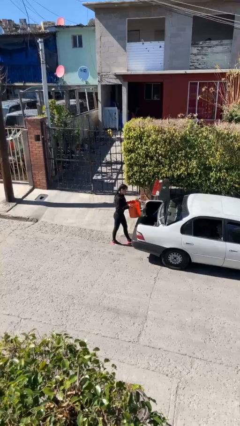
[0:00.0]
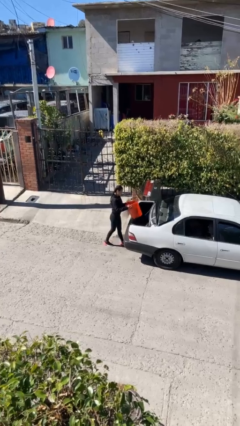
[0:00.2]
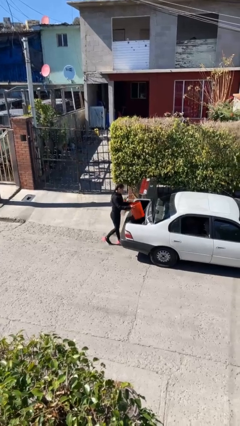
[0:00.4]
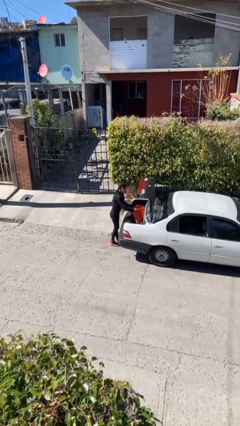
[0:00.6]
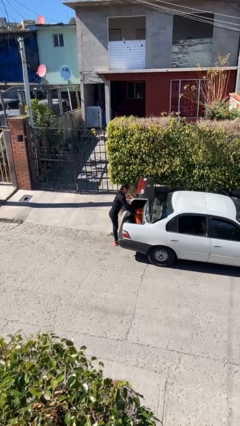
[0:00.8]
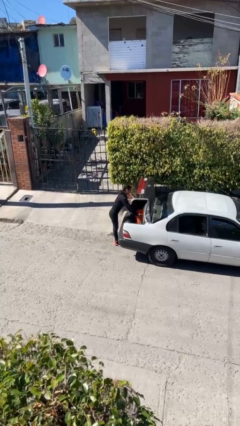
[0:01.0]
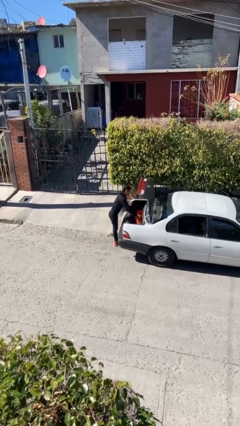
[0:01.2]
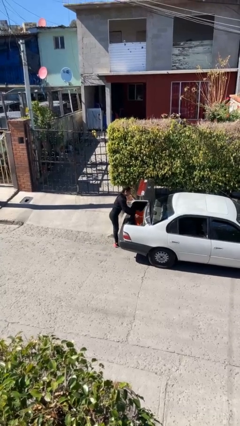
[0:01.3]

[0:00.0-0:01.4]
person loads car

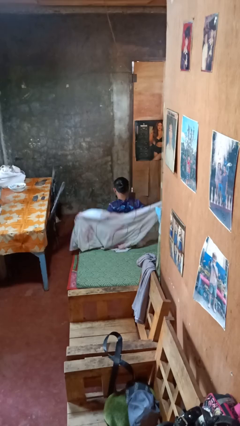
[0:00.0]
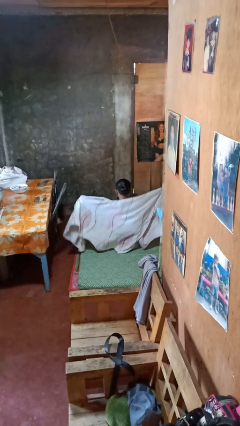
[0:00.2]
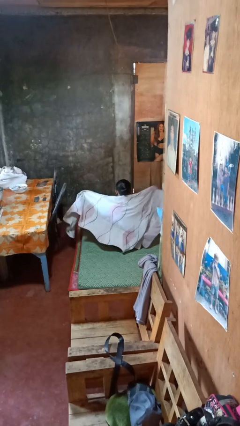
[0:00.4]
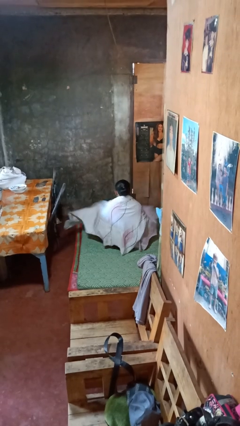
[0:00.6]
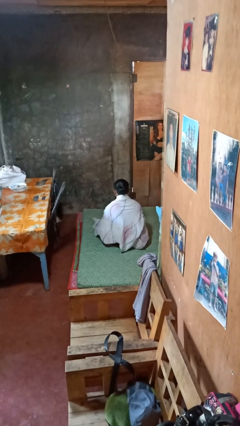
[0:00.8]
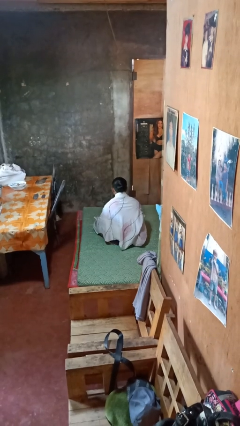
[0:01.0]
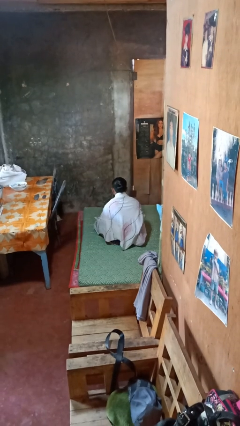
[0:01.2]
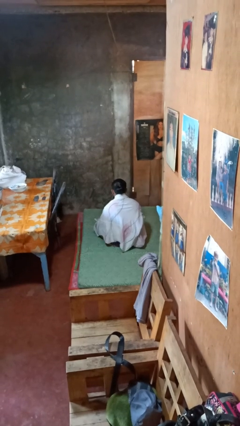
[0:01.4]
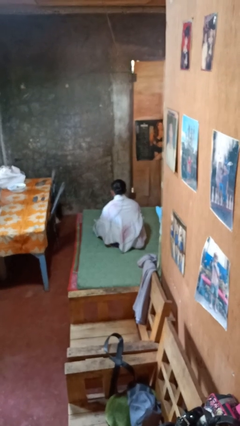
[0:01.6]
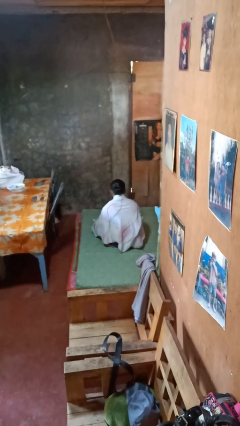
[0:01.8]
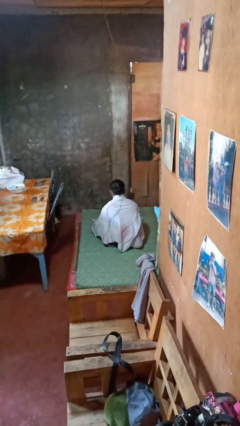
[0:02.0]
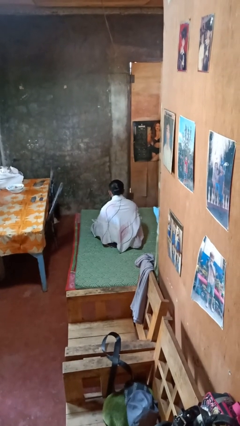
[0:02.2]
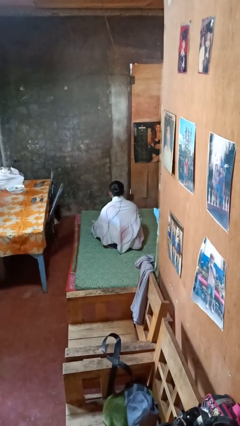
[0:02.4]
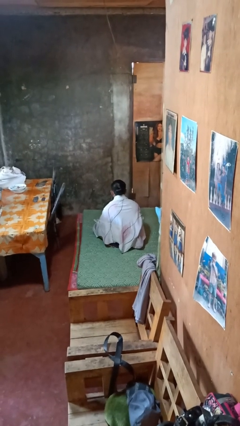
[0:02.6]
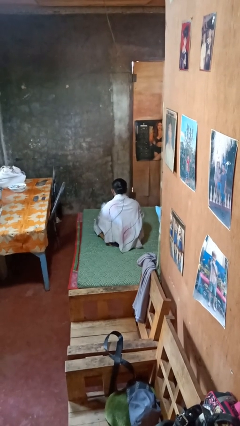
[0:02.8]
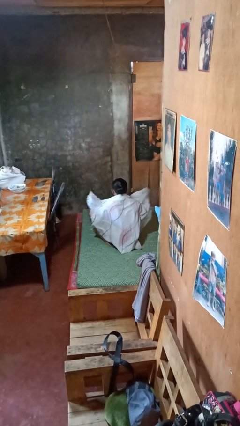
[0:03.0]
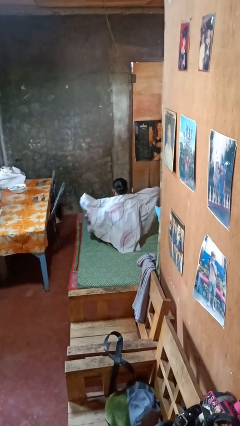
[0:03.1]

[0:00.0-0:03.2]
person covers with blanket

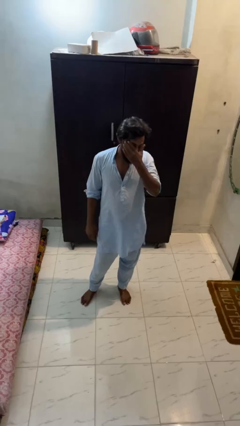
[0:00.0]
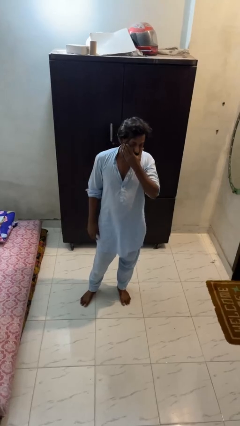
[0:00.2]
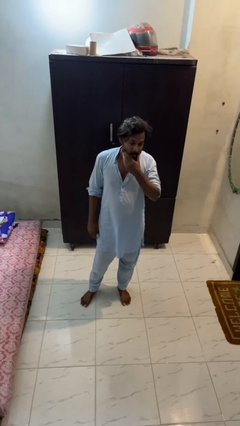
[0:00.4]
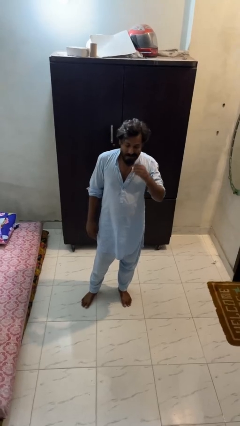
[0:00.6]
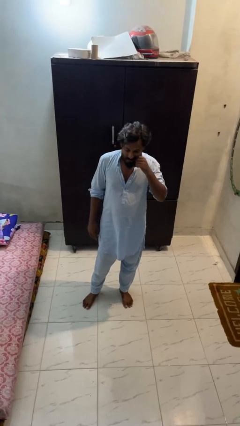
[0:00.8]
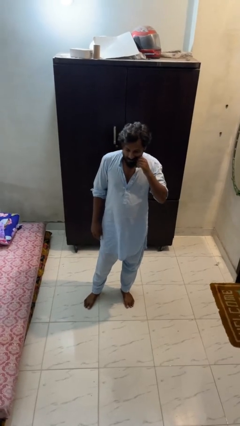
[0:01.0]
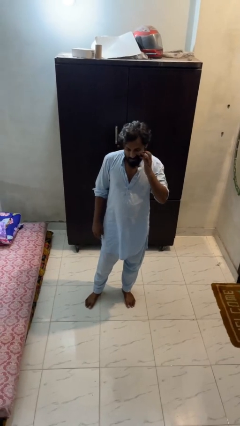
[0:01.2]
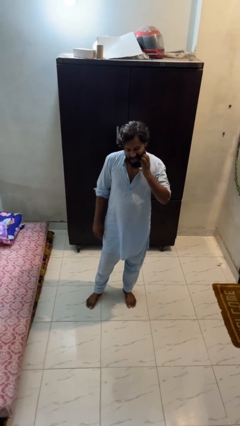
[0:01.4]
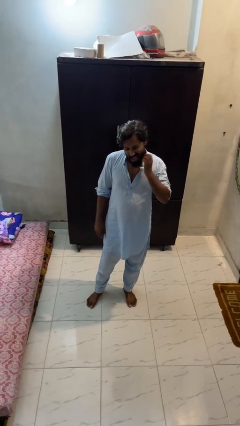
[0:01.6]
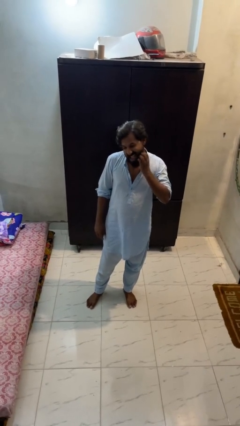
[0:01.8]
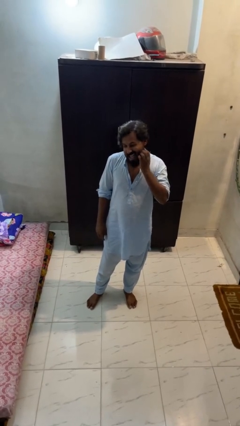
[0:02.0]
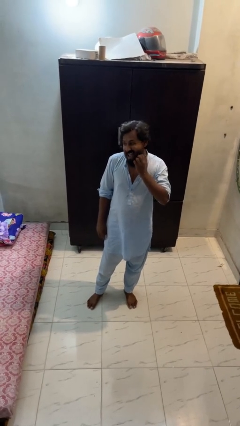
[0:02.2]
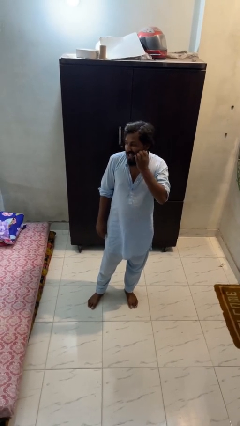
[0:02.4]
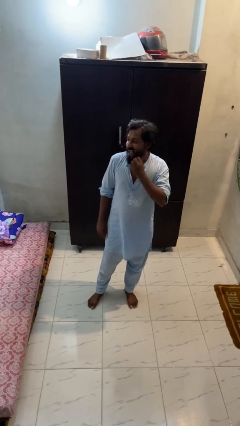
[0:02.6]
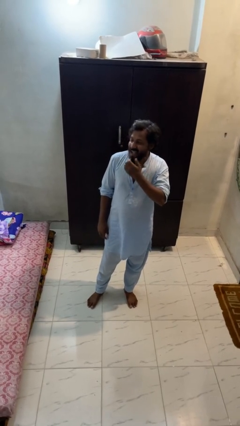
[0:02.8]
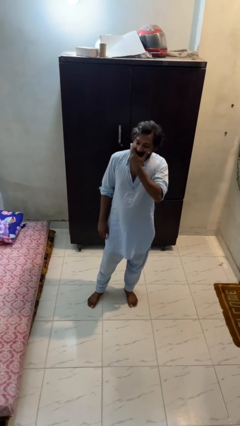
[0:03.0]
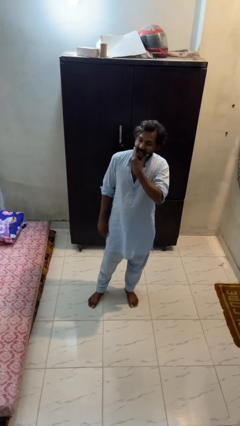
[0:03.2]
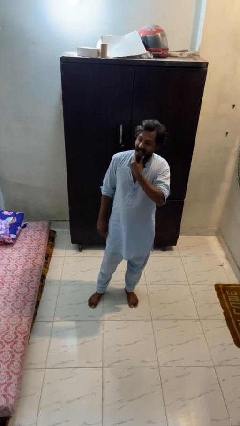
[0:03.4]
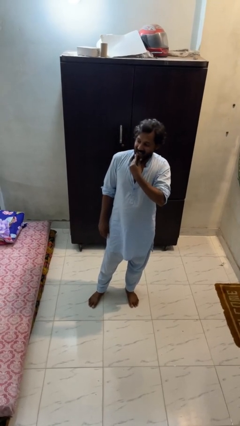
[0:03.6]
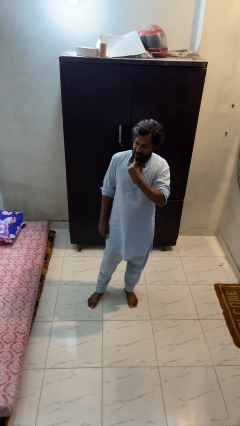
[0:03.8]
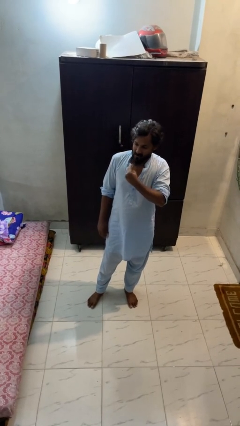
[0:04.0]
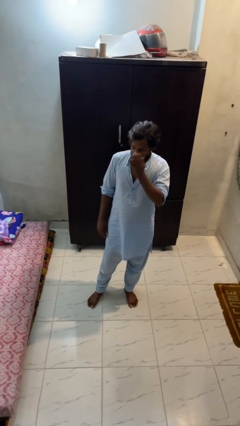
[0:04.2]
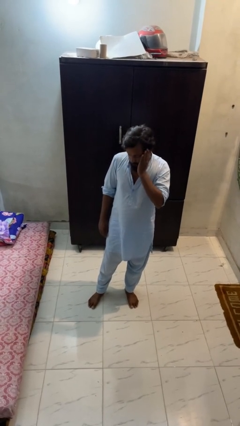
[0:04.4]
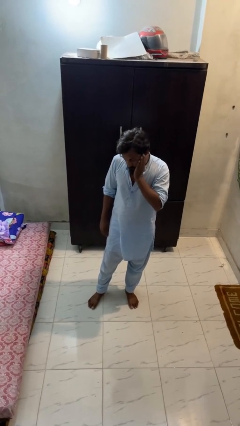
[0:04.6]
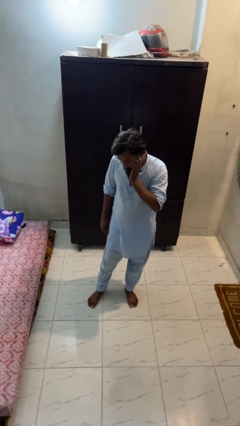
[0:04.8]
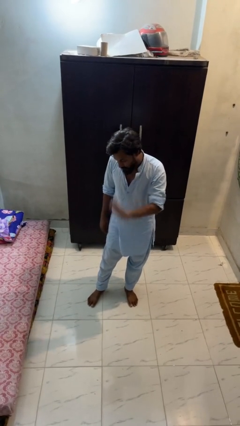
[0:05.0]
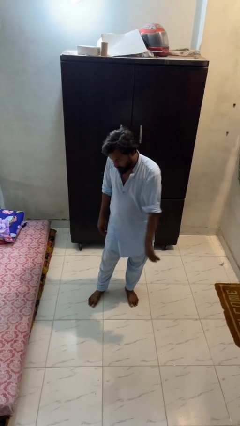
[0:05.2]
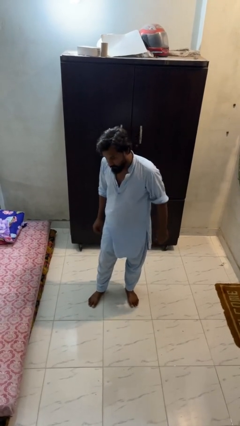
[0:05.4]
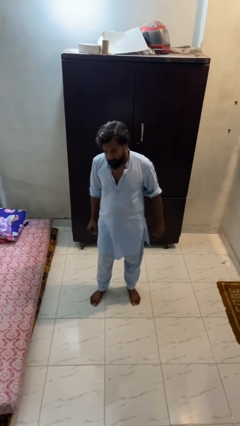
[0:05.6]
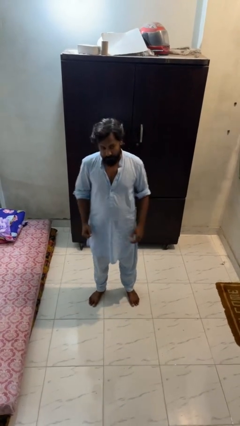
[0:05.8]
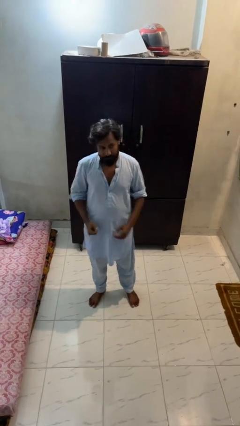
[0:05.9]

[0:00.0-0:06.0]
person scratches face

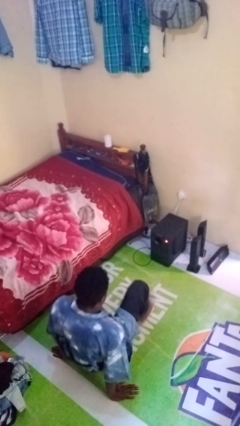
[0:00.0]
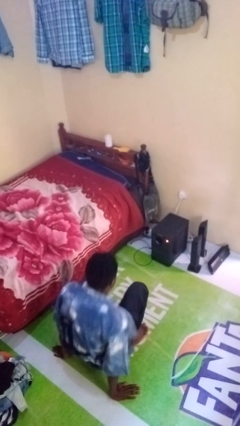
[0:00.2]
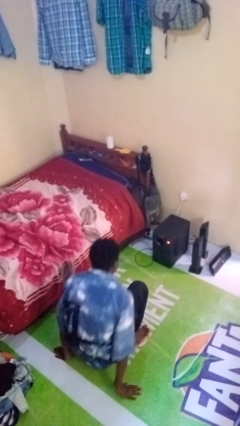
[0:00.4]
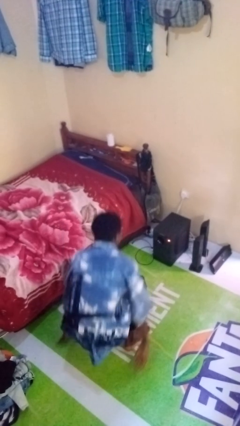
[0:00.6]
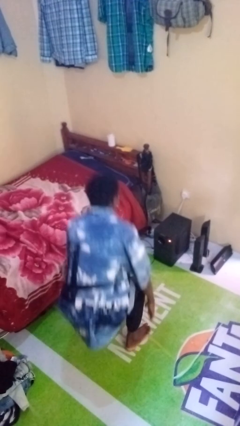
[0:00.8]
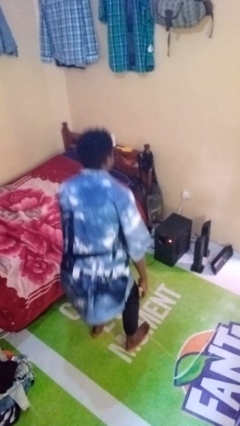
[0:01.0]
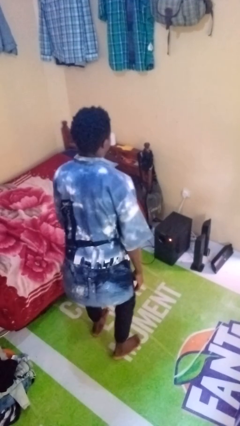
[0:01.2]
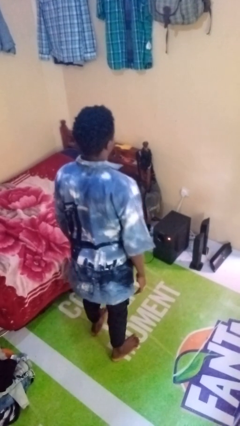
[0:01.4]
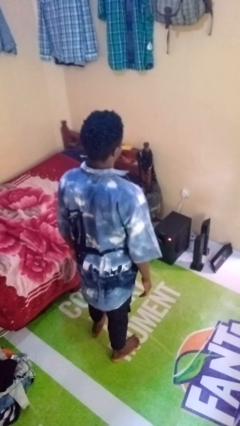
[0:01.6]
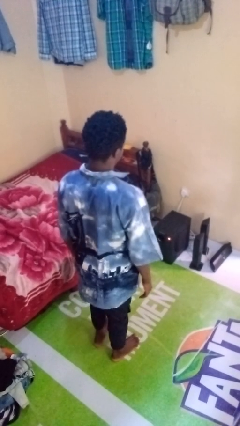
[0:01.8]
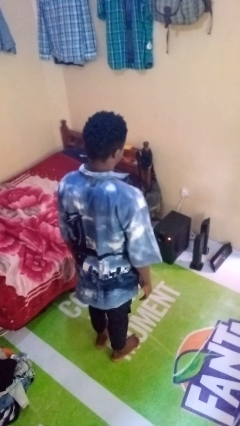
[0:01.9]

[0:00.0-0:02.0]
person stands up from floor

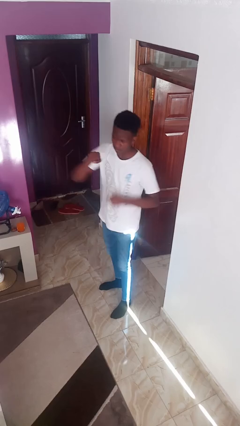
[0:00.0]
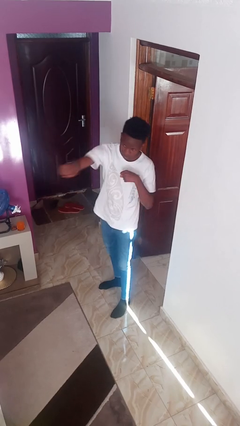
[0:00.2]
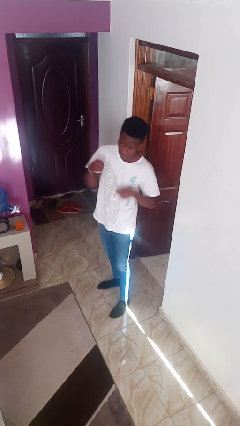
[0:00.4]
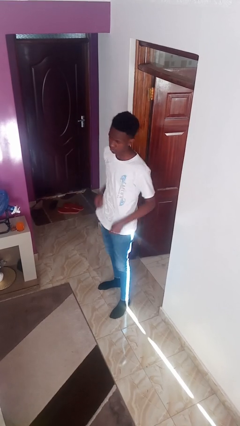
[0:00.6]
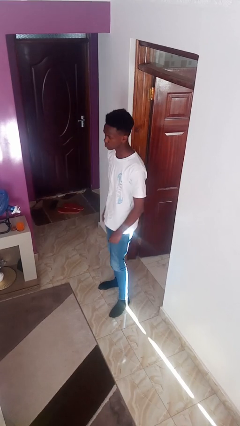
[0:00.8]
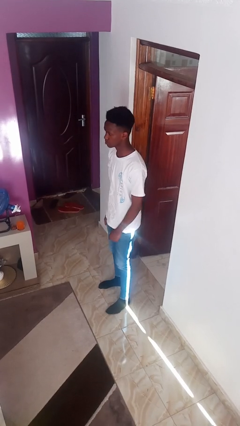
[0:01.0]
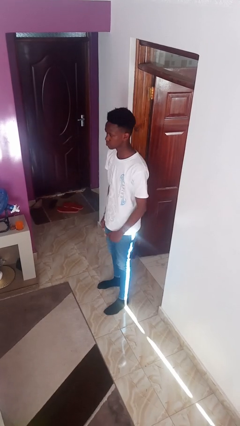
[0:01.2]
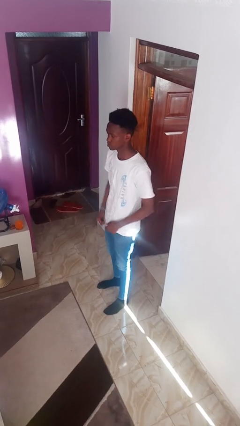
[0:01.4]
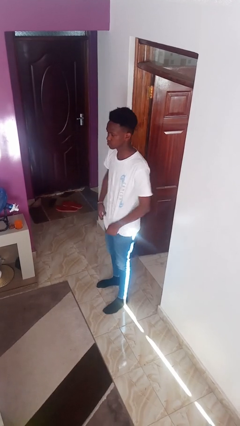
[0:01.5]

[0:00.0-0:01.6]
person punches

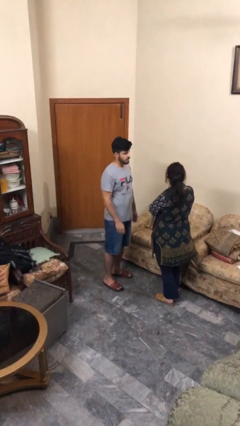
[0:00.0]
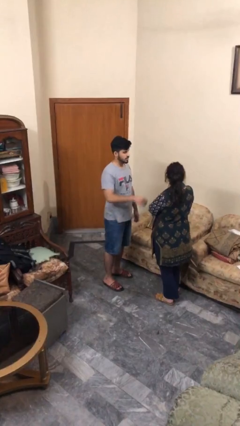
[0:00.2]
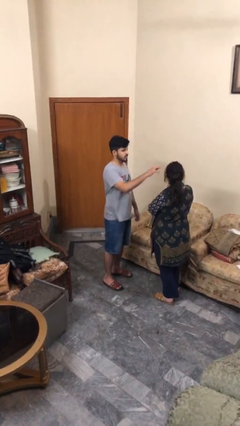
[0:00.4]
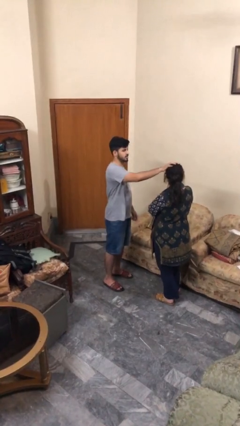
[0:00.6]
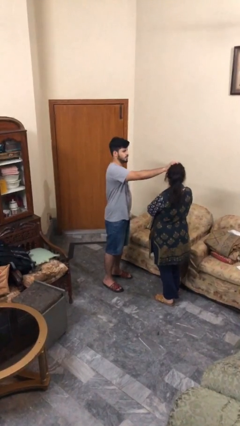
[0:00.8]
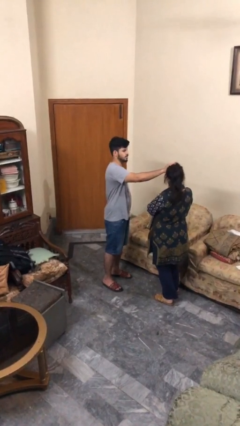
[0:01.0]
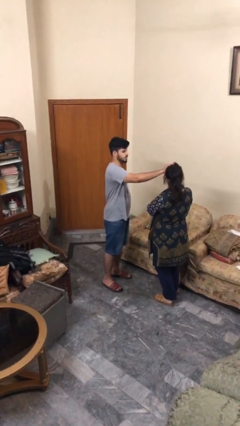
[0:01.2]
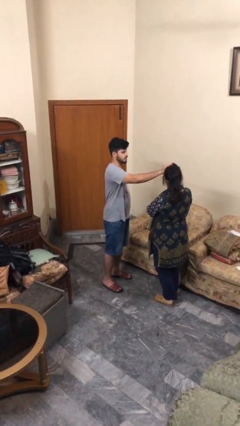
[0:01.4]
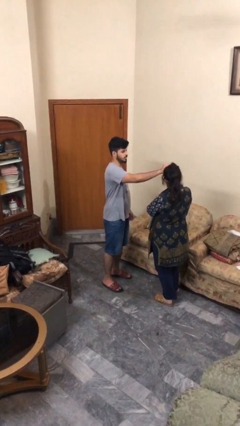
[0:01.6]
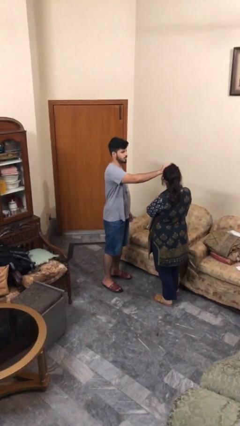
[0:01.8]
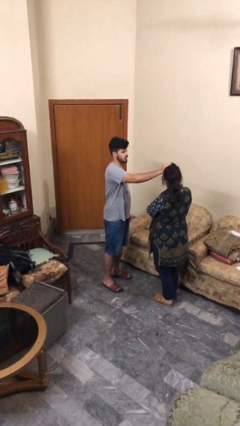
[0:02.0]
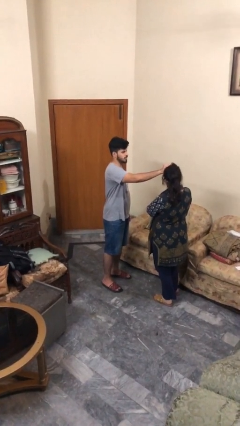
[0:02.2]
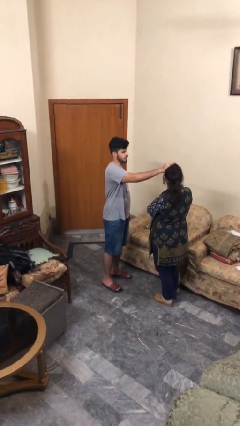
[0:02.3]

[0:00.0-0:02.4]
person grabs person by hair

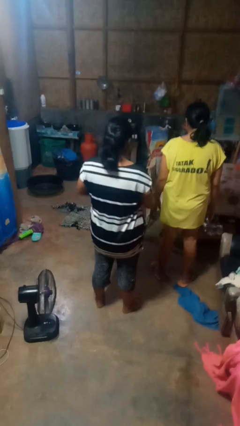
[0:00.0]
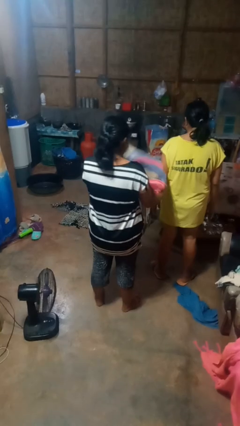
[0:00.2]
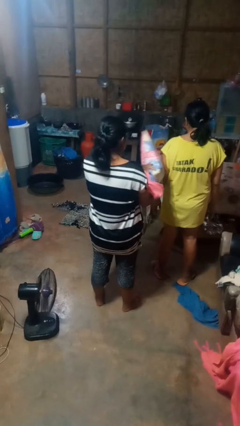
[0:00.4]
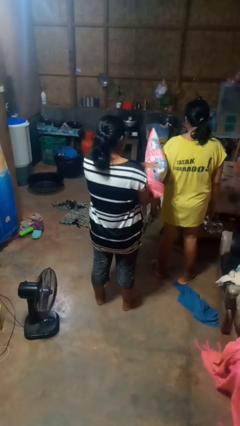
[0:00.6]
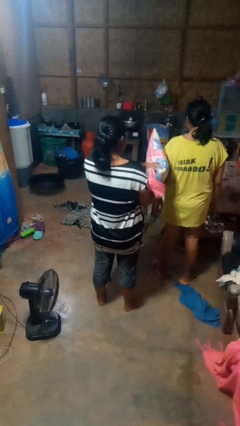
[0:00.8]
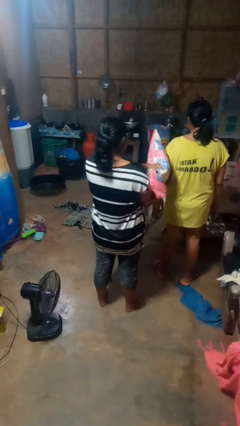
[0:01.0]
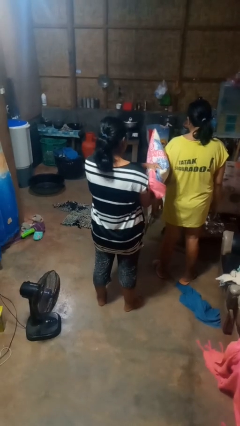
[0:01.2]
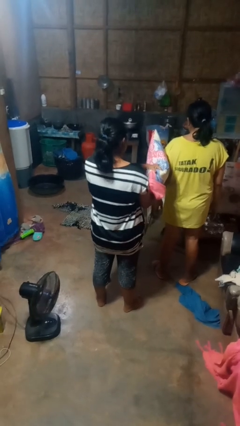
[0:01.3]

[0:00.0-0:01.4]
person hits person with pillow
